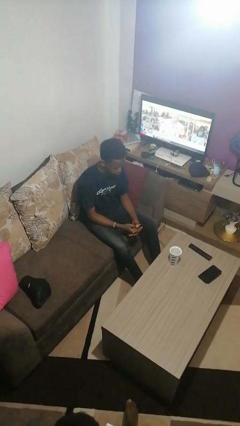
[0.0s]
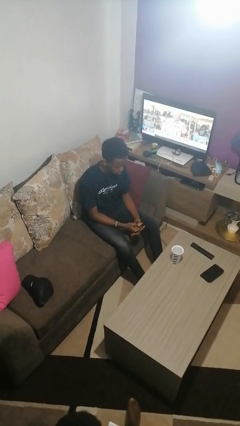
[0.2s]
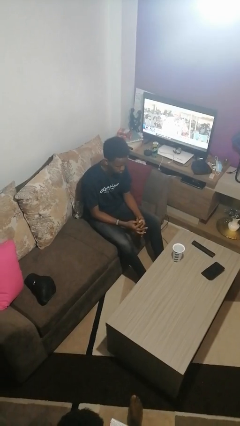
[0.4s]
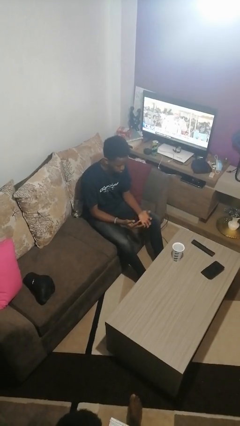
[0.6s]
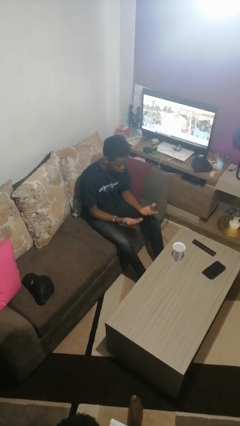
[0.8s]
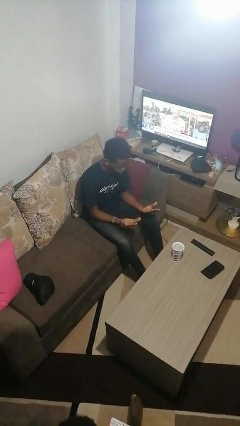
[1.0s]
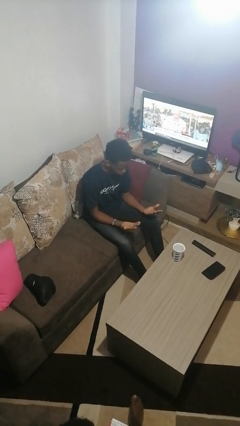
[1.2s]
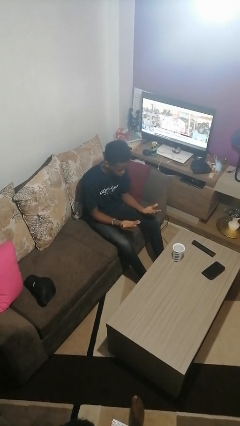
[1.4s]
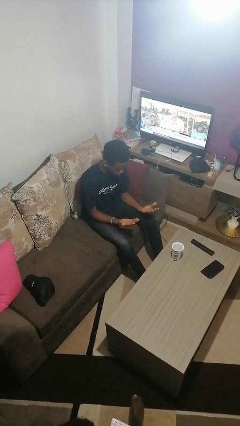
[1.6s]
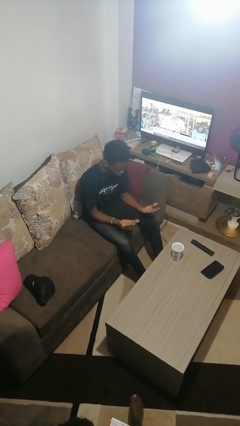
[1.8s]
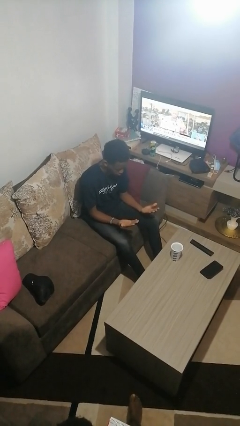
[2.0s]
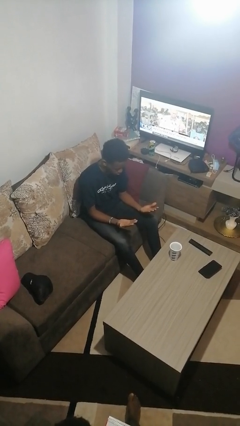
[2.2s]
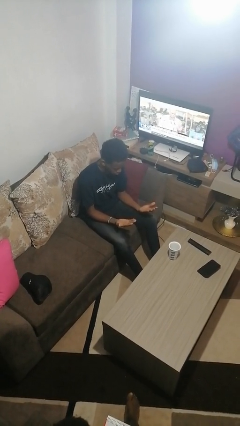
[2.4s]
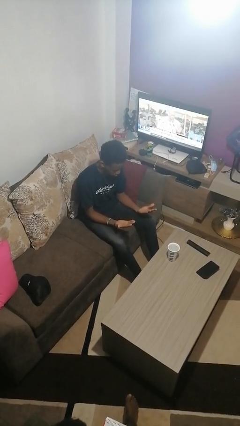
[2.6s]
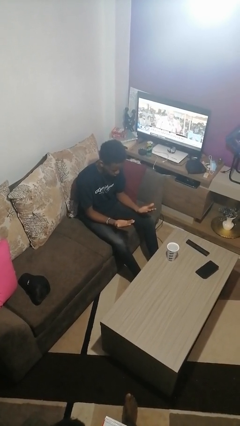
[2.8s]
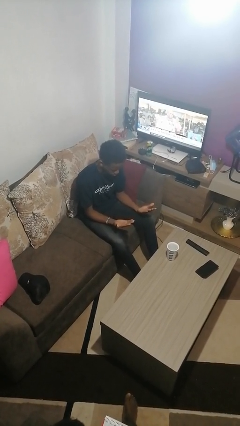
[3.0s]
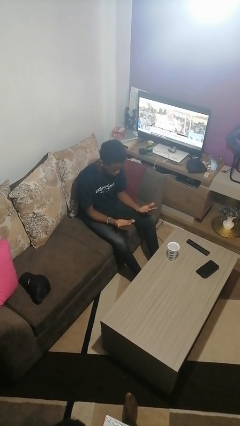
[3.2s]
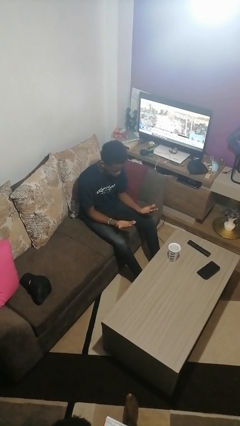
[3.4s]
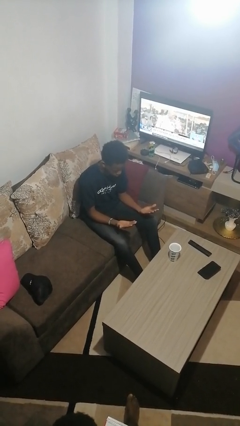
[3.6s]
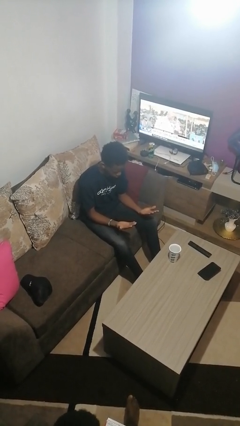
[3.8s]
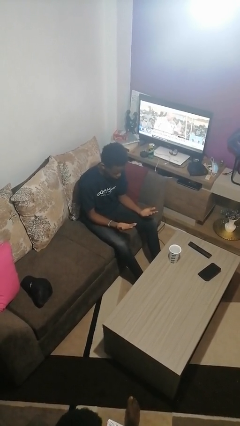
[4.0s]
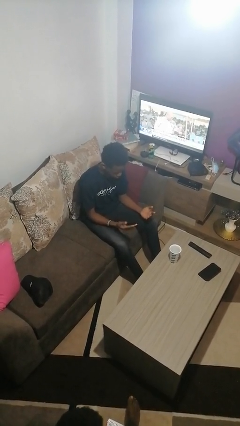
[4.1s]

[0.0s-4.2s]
person looks at hands in lap

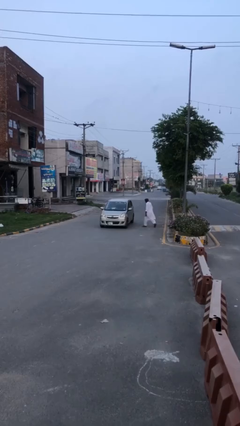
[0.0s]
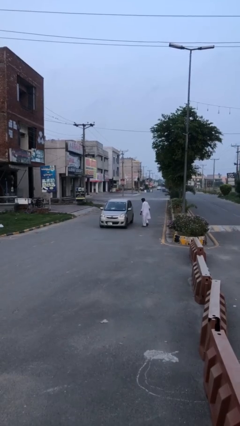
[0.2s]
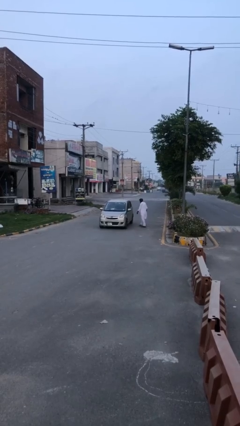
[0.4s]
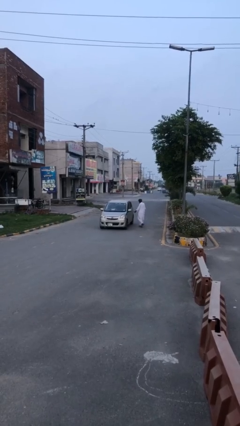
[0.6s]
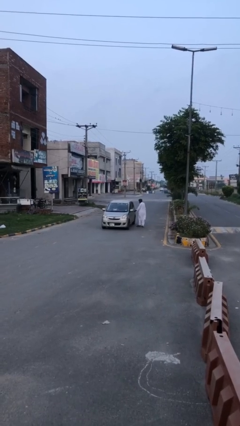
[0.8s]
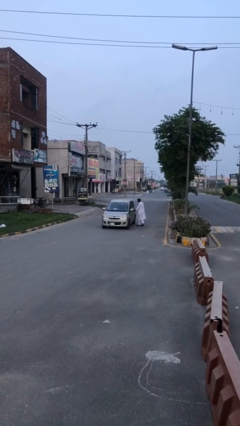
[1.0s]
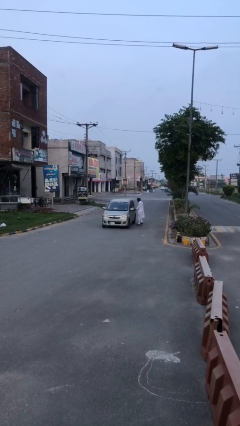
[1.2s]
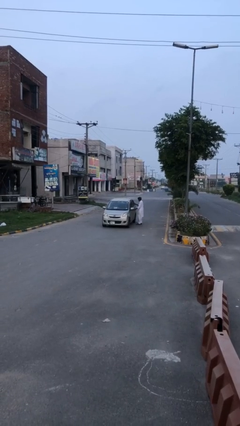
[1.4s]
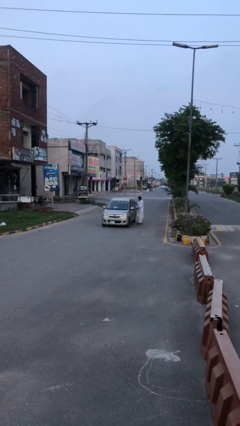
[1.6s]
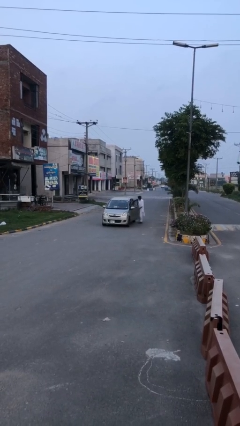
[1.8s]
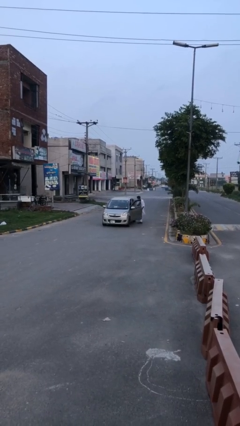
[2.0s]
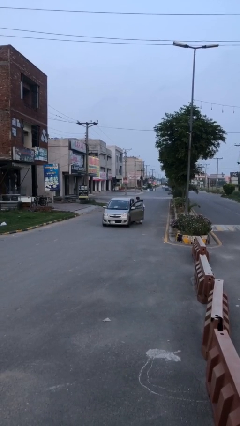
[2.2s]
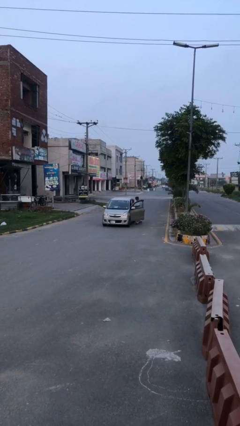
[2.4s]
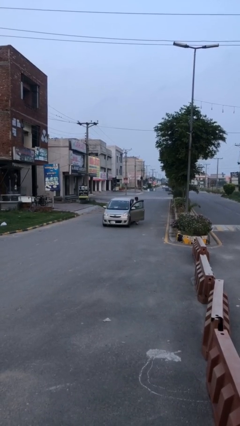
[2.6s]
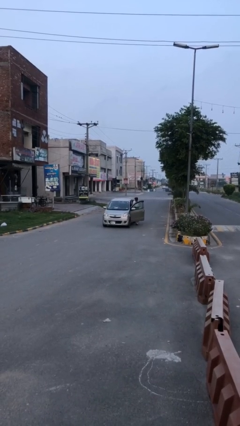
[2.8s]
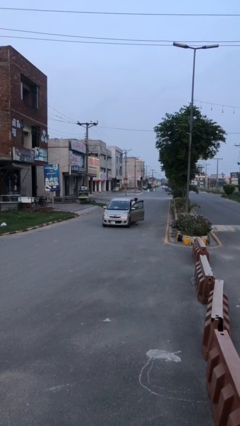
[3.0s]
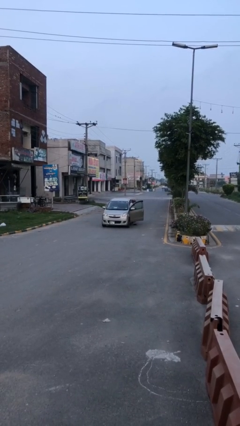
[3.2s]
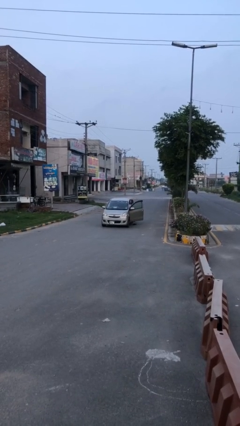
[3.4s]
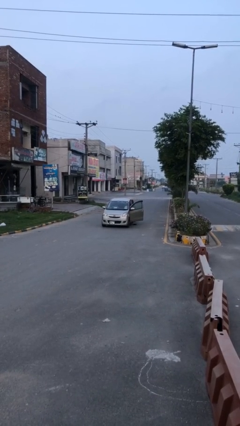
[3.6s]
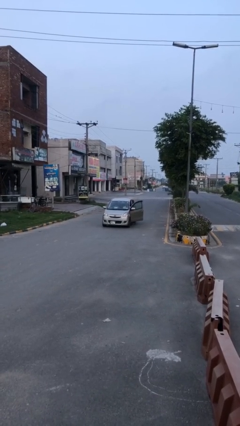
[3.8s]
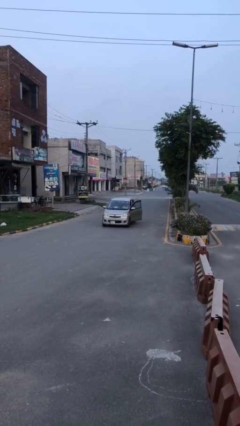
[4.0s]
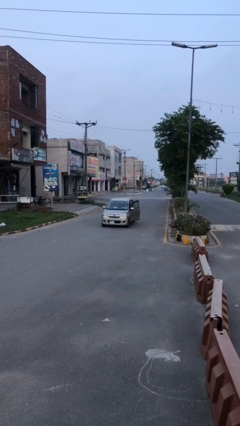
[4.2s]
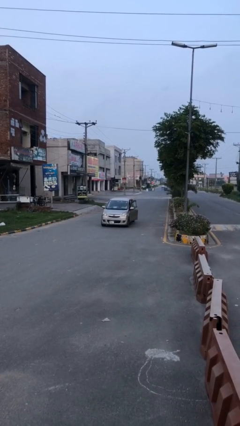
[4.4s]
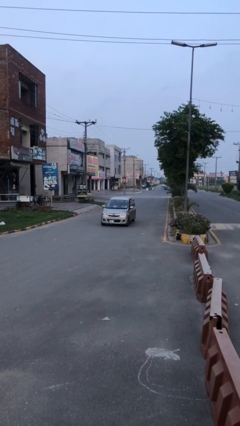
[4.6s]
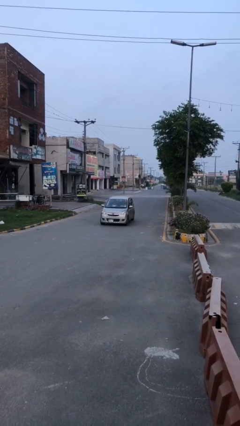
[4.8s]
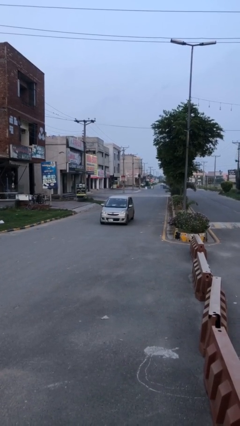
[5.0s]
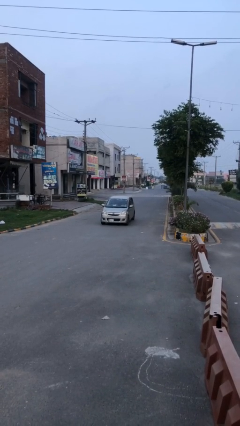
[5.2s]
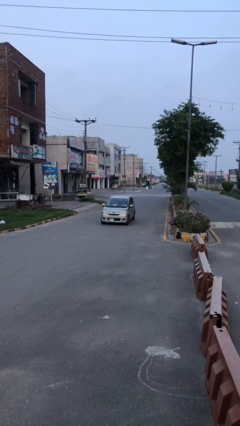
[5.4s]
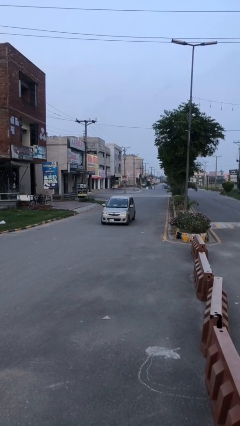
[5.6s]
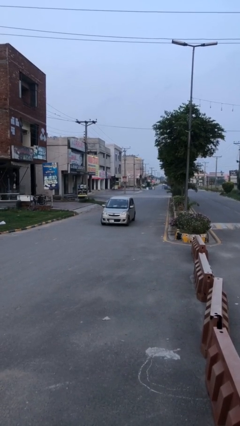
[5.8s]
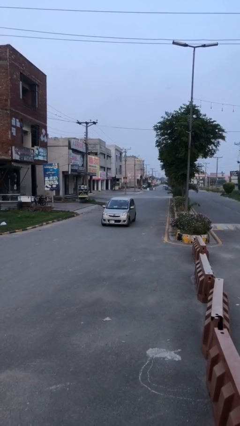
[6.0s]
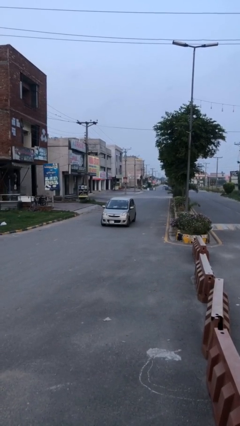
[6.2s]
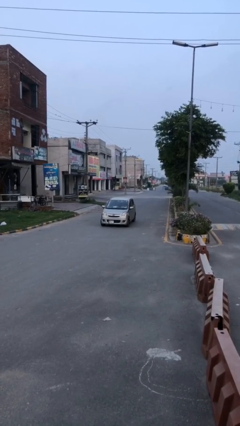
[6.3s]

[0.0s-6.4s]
car picks up person

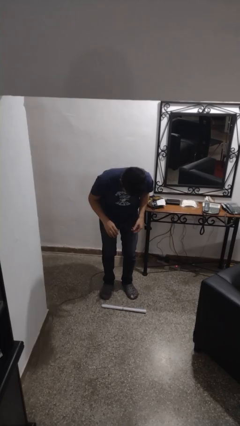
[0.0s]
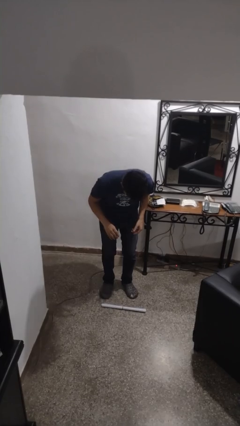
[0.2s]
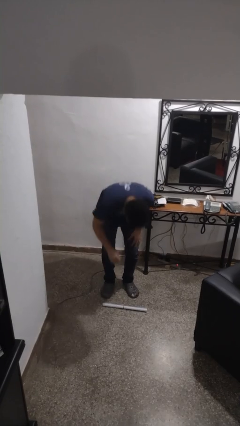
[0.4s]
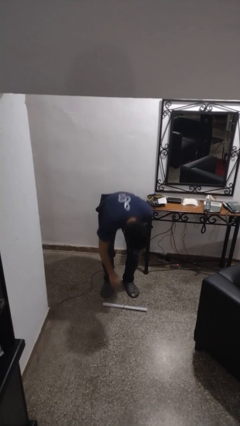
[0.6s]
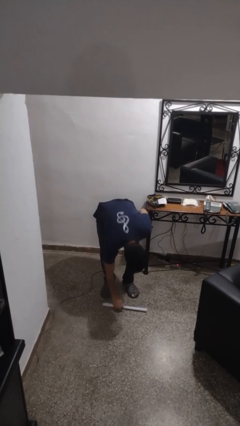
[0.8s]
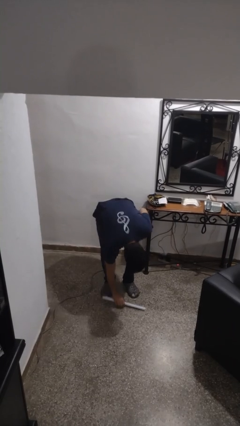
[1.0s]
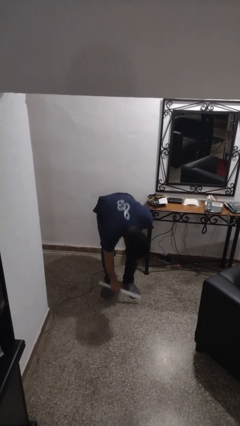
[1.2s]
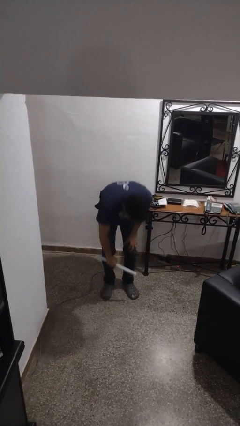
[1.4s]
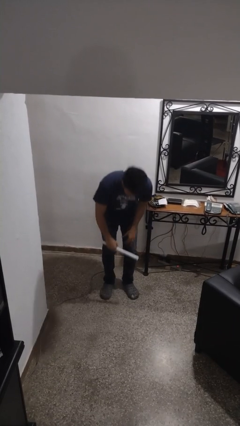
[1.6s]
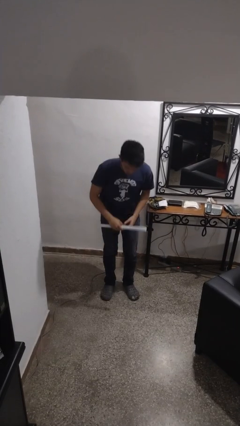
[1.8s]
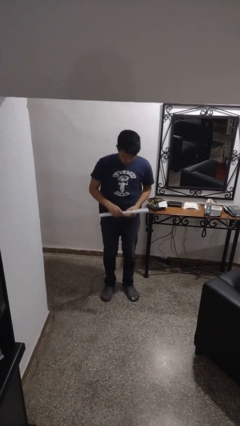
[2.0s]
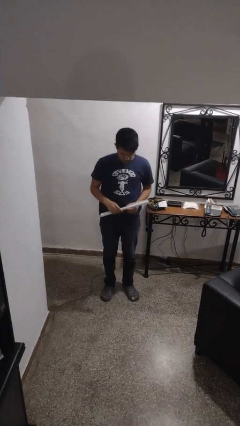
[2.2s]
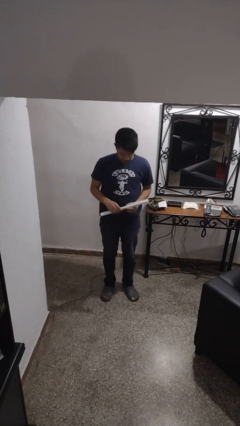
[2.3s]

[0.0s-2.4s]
person picks up object from floor

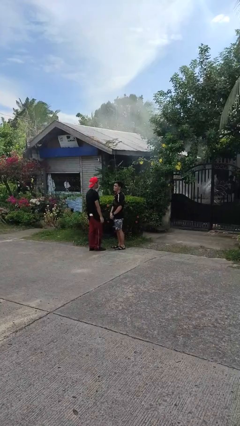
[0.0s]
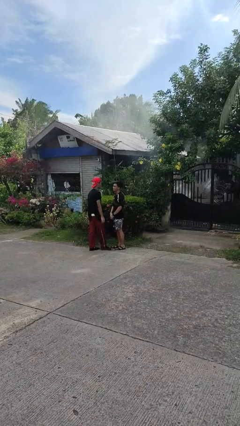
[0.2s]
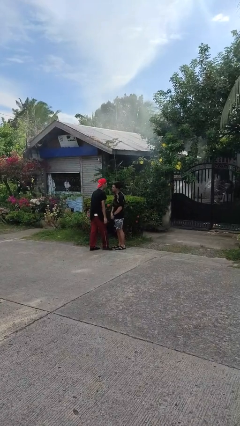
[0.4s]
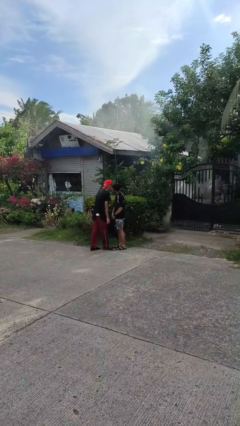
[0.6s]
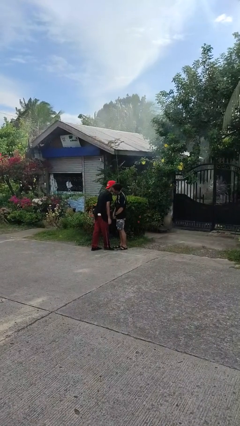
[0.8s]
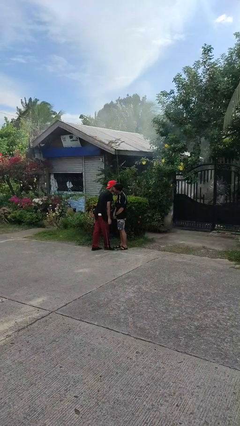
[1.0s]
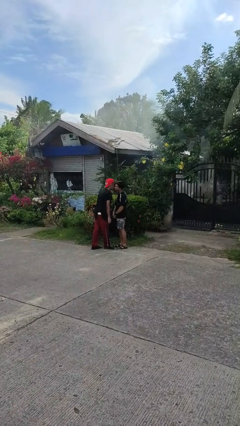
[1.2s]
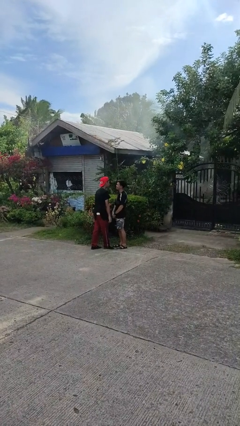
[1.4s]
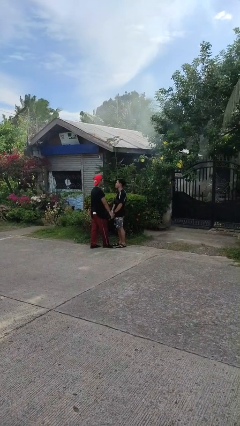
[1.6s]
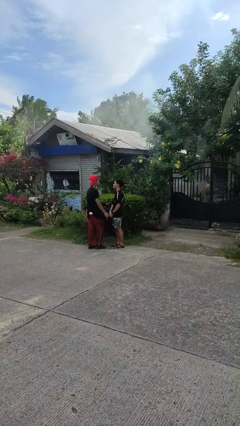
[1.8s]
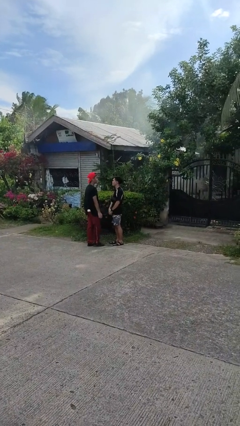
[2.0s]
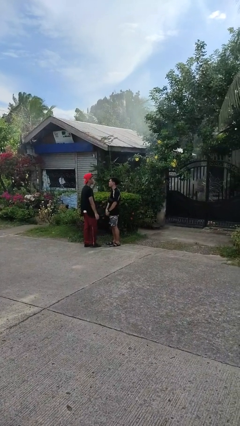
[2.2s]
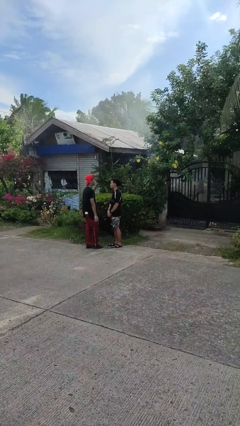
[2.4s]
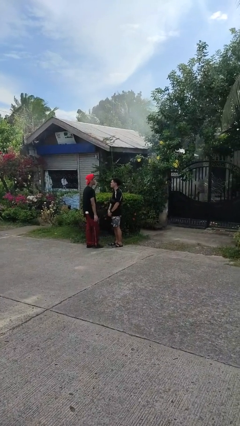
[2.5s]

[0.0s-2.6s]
person kisses cheek of person

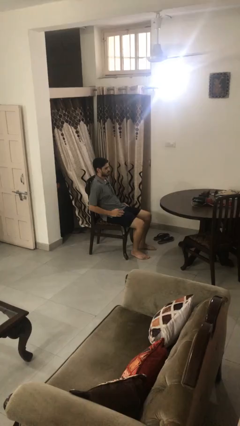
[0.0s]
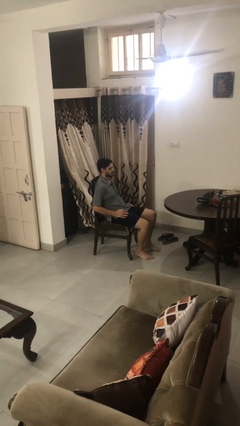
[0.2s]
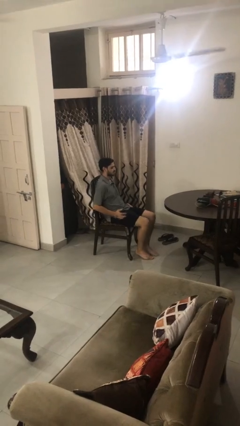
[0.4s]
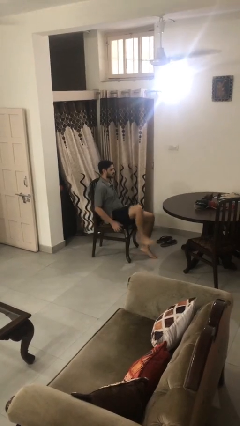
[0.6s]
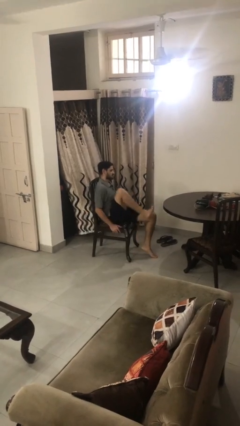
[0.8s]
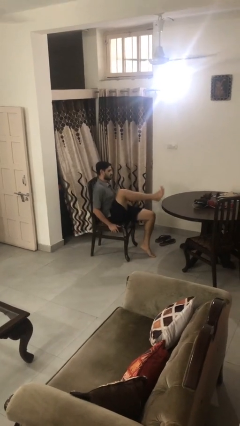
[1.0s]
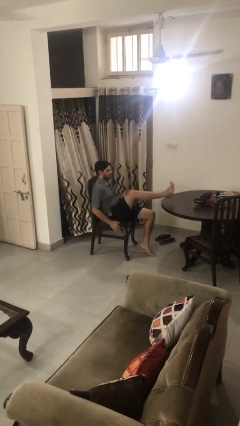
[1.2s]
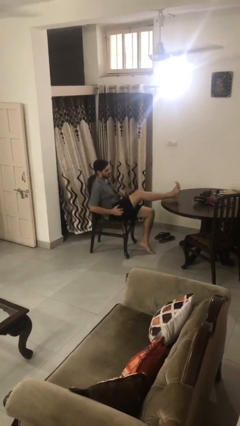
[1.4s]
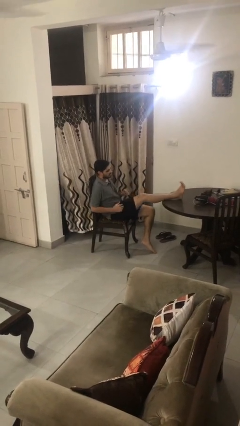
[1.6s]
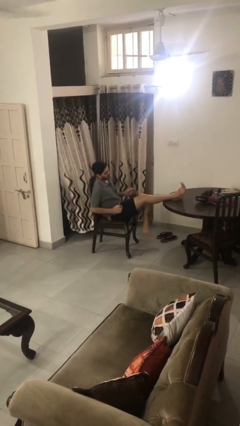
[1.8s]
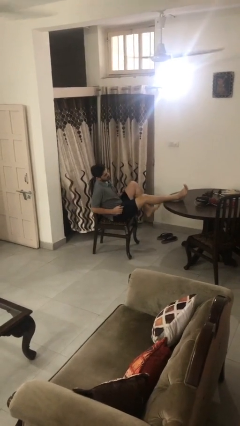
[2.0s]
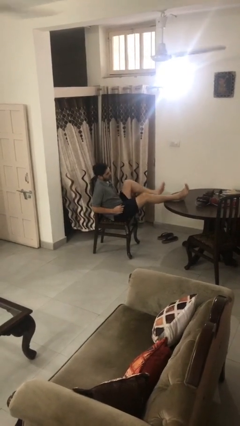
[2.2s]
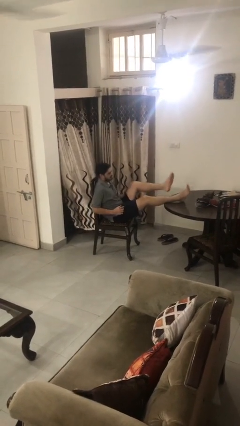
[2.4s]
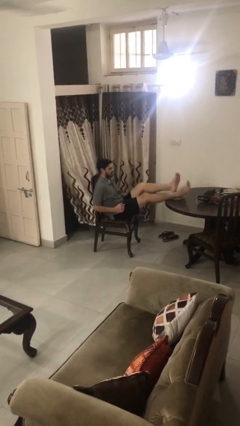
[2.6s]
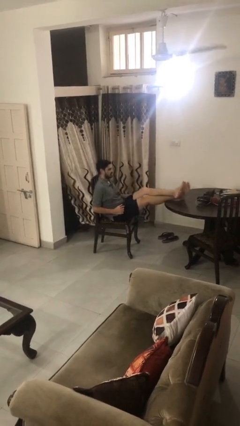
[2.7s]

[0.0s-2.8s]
person puts feet up
